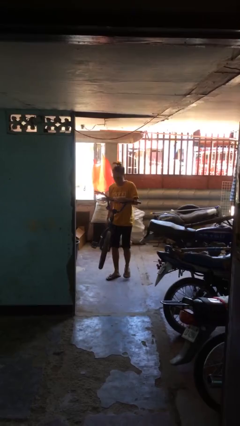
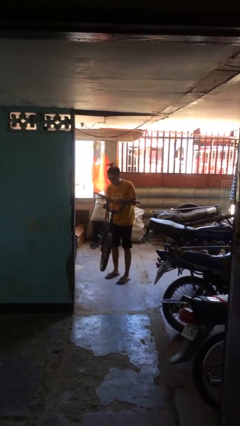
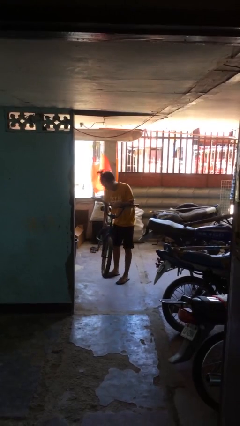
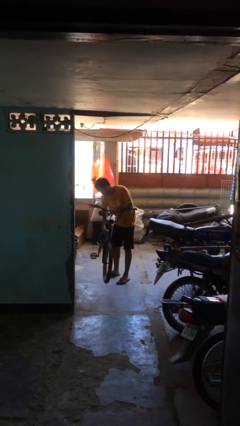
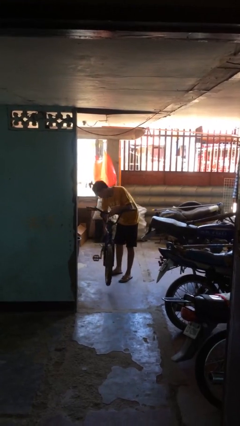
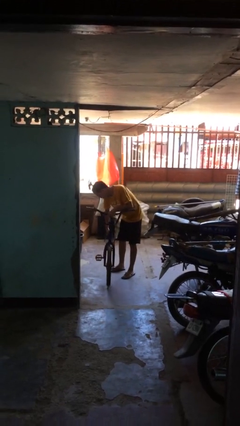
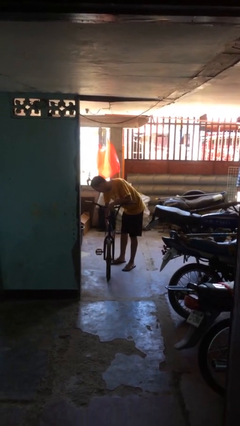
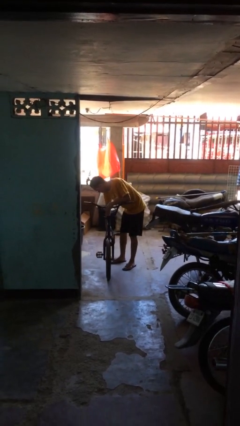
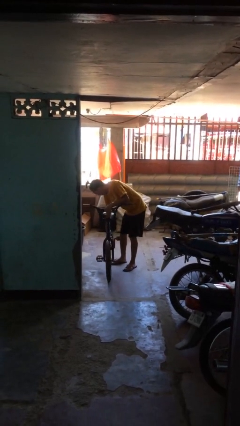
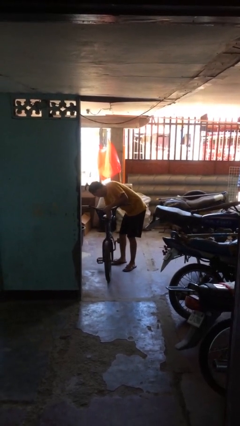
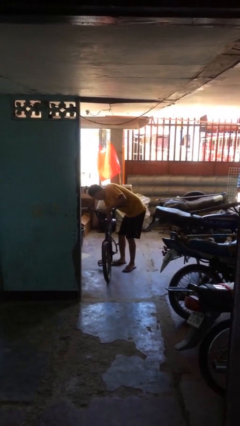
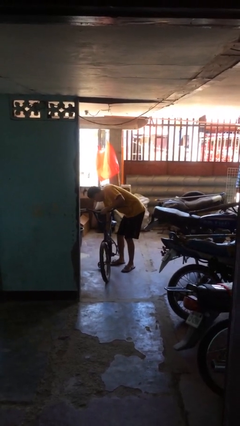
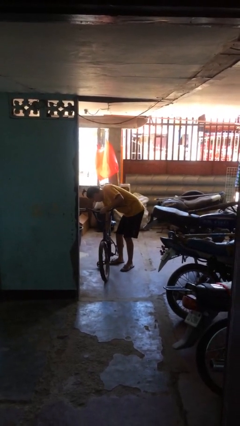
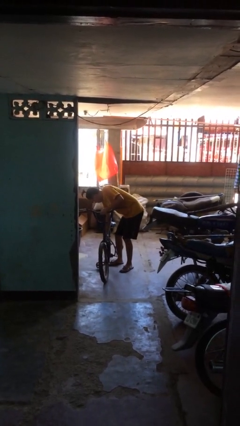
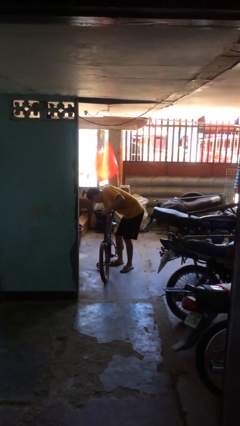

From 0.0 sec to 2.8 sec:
person puts down object on floor

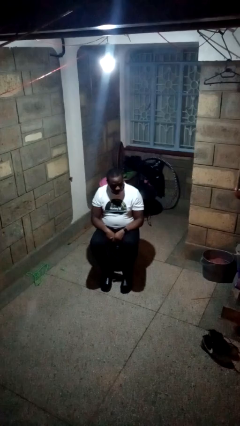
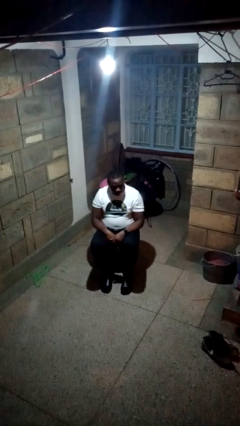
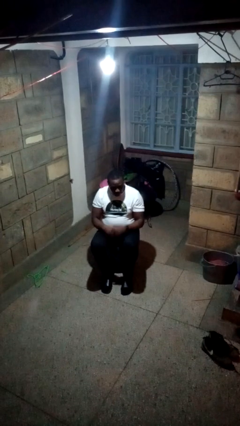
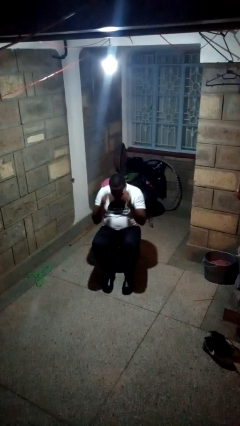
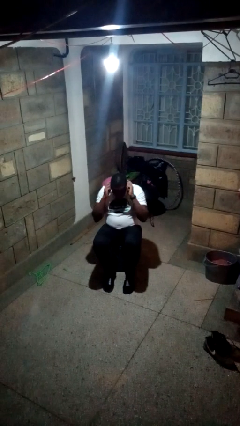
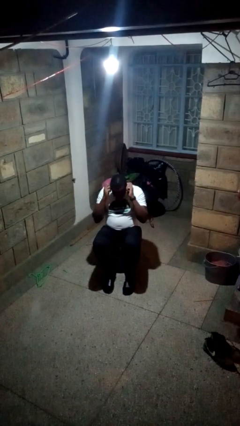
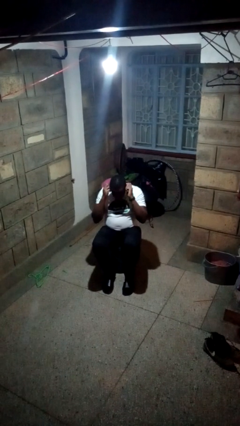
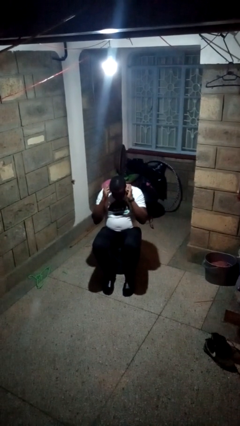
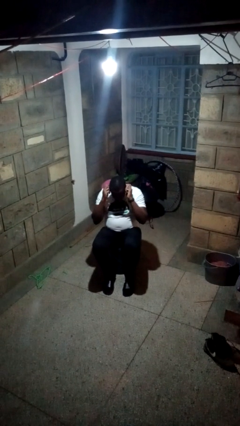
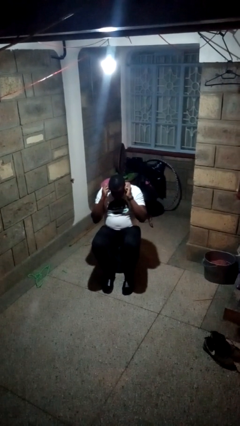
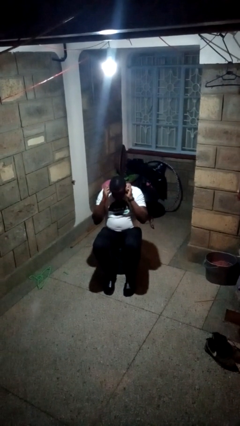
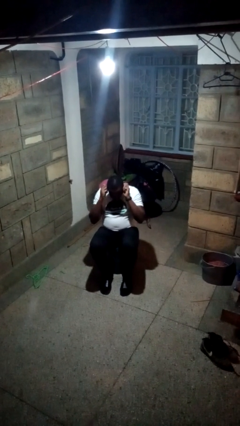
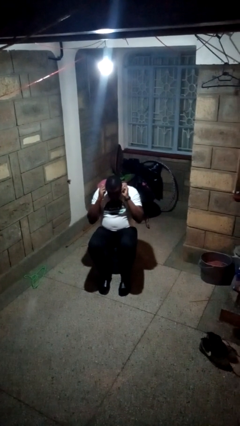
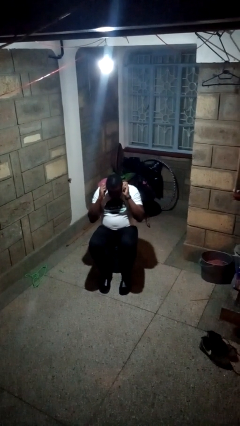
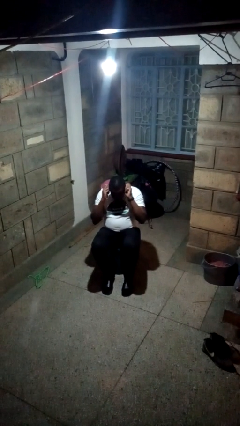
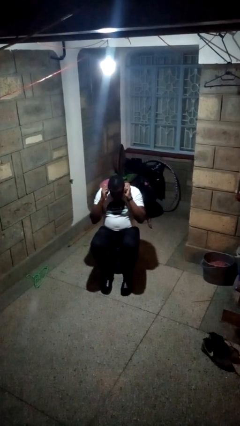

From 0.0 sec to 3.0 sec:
person touches earlobe

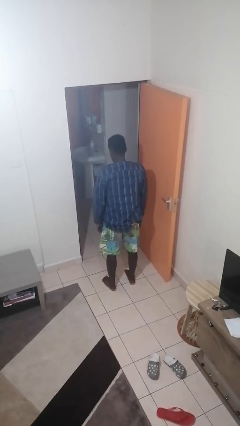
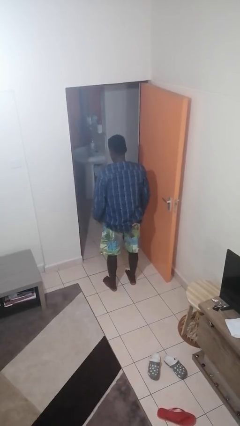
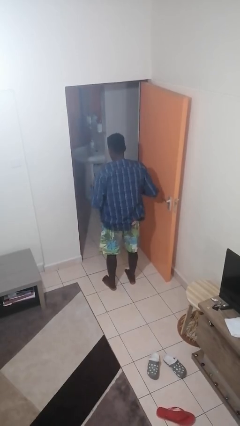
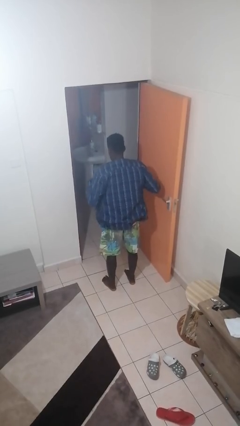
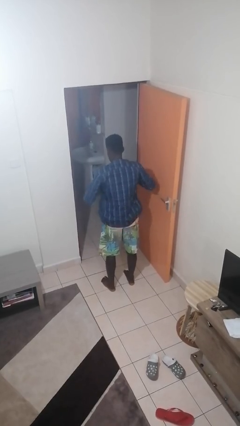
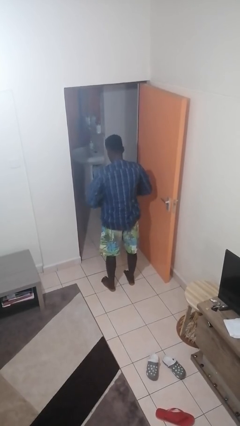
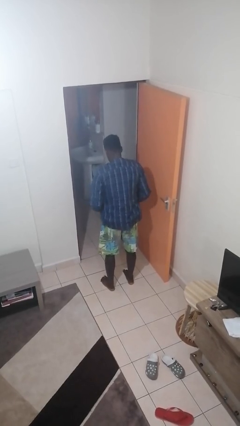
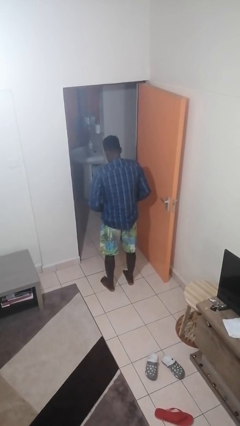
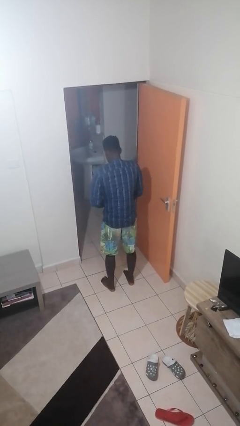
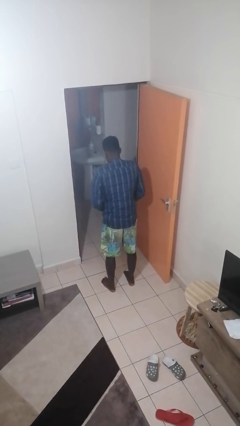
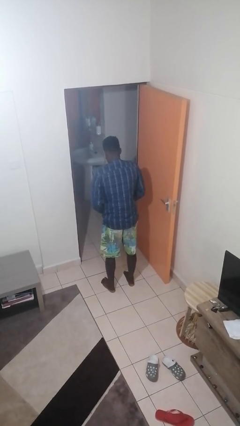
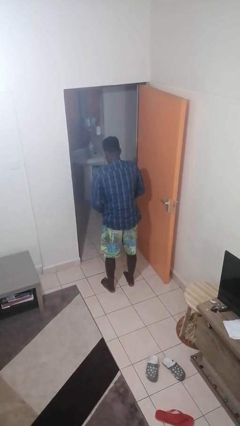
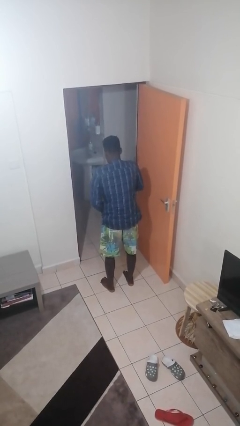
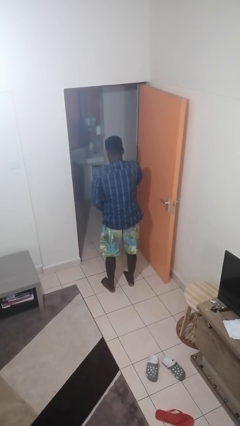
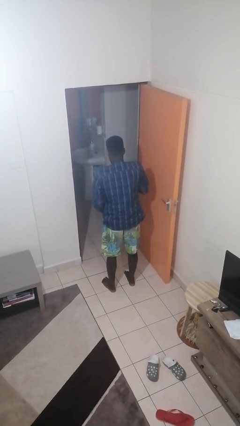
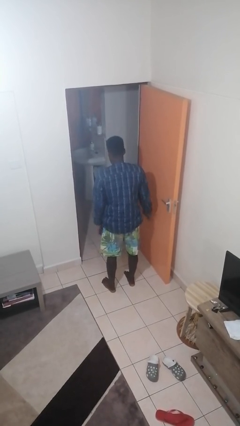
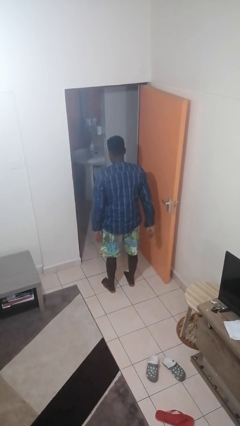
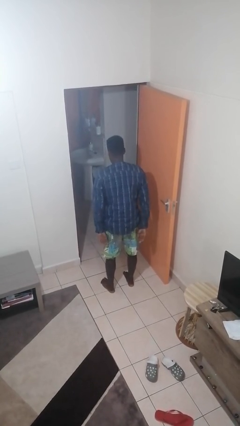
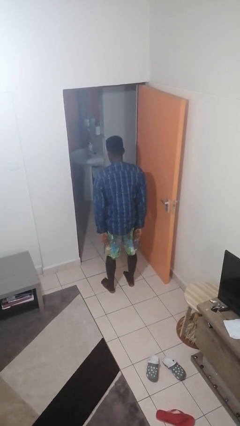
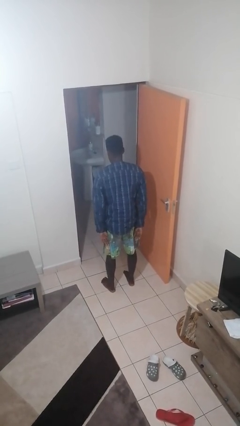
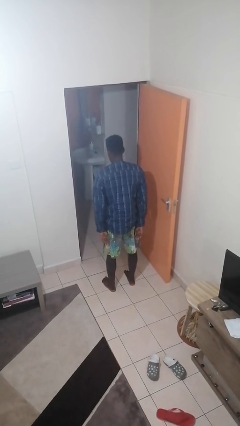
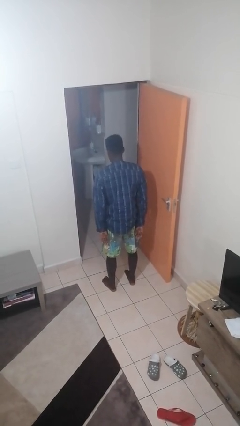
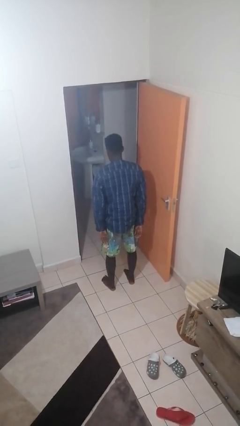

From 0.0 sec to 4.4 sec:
person zips up jacket

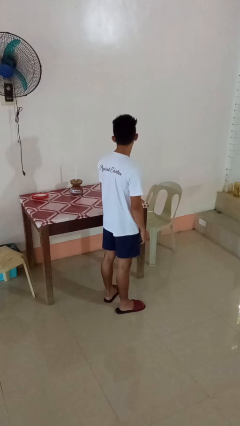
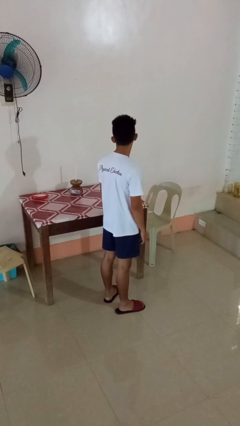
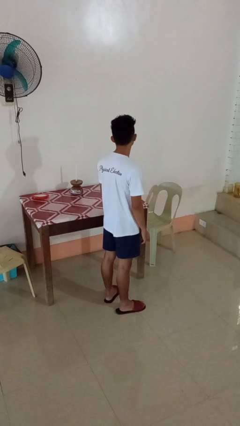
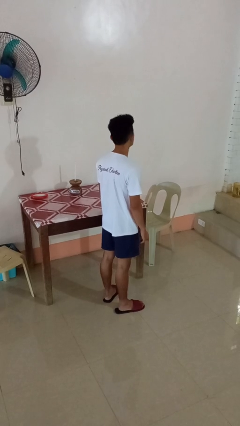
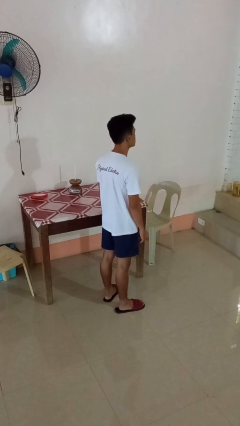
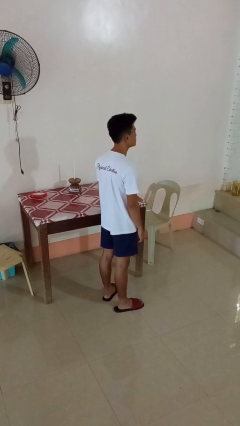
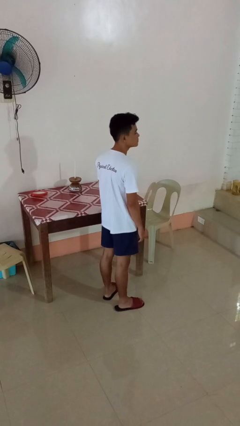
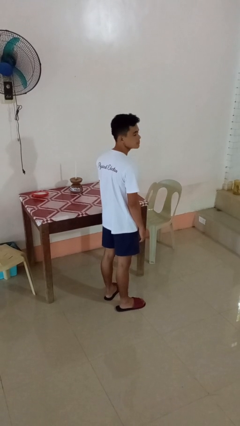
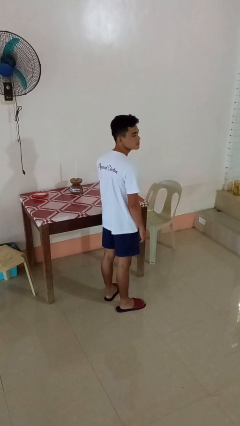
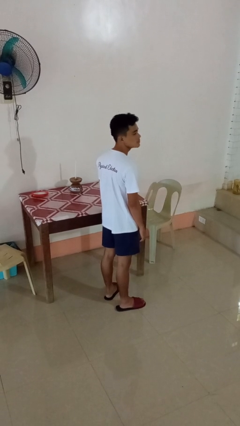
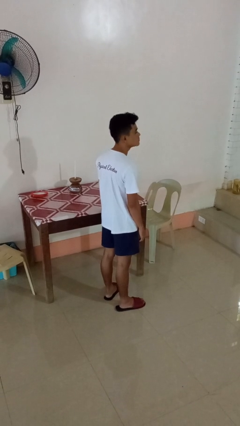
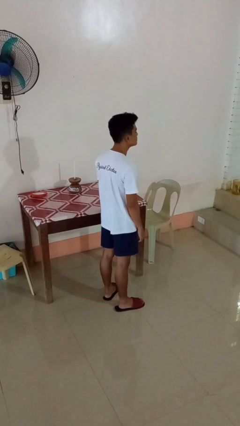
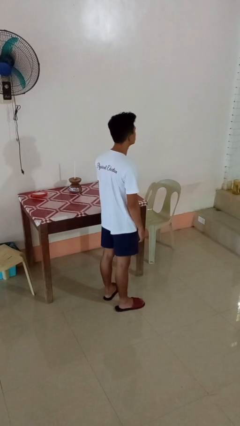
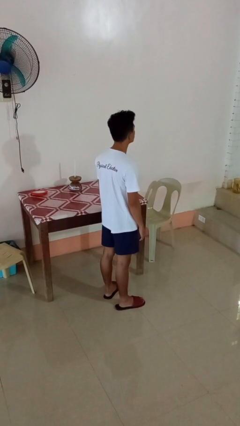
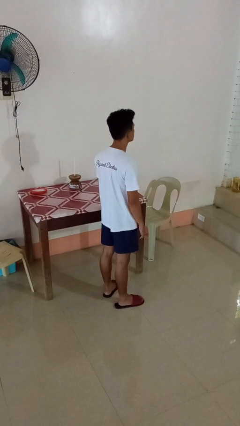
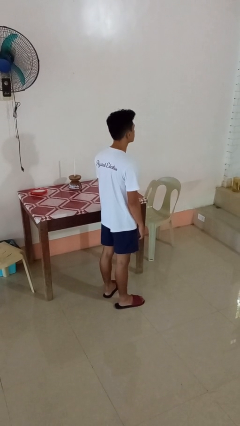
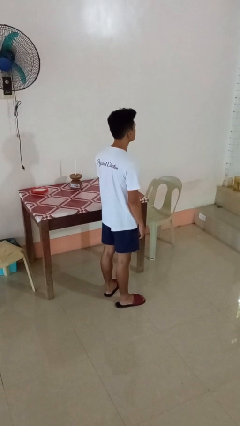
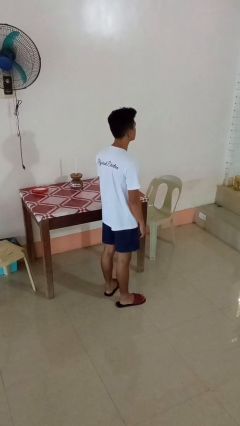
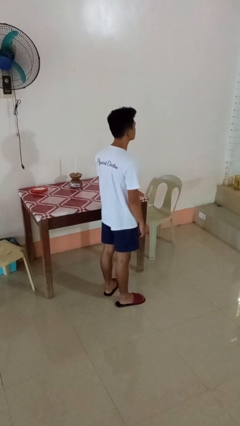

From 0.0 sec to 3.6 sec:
person shakes head

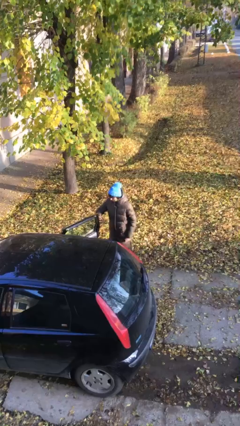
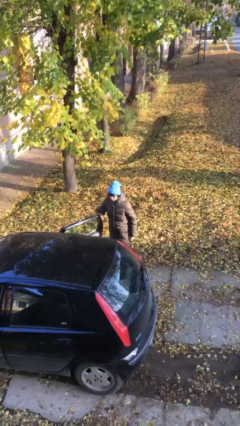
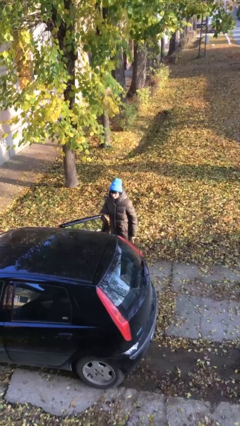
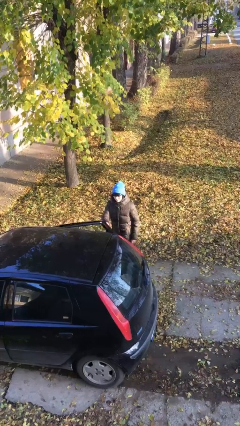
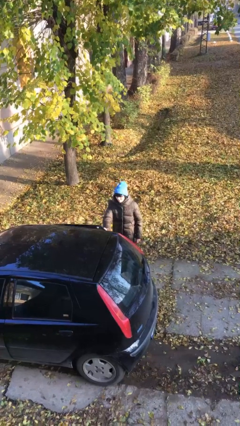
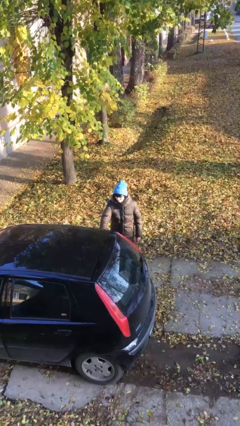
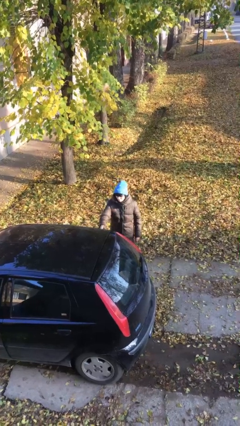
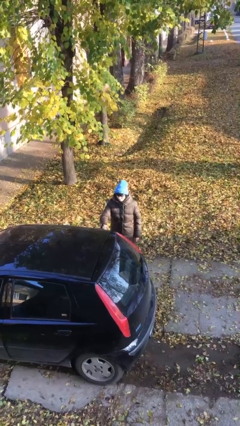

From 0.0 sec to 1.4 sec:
person closes car door

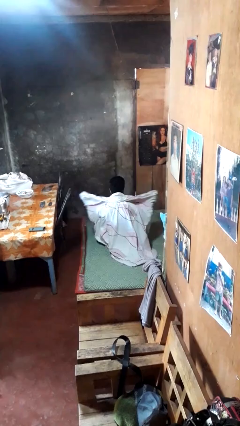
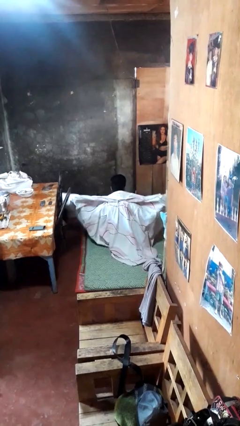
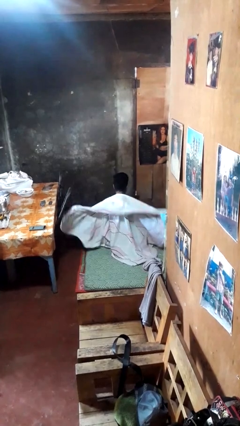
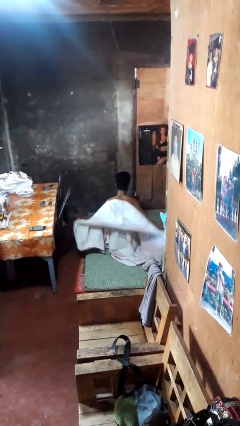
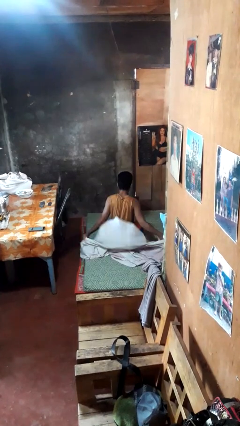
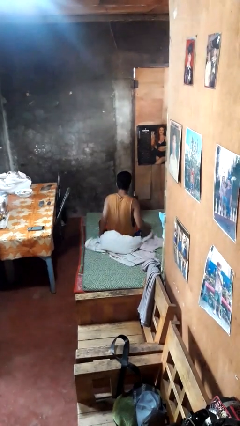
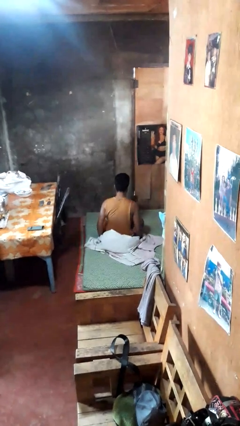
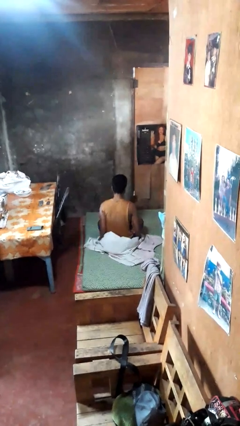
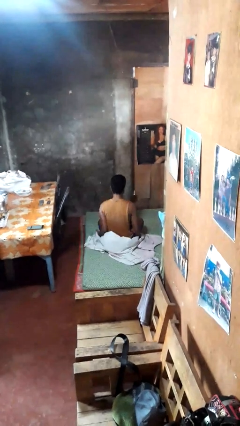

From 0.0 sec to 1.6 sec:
person uncovers with blanket
